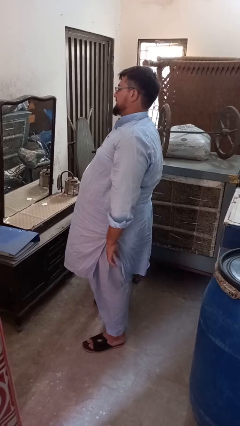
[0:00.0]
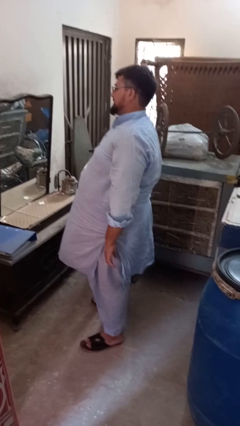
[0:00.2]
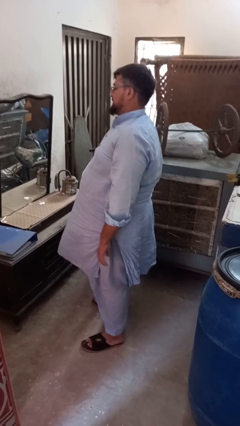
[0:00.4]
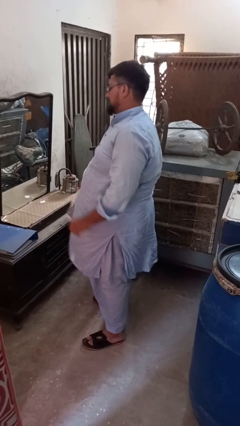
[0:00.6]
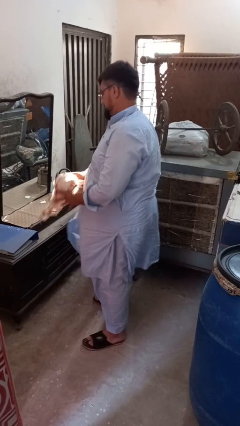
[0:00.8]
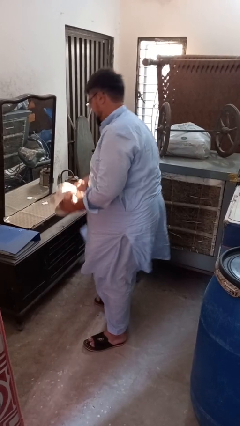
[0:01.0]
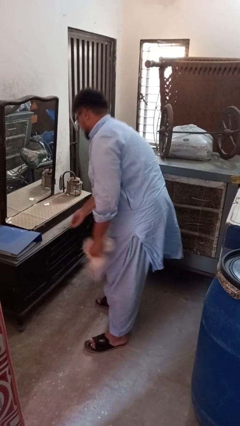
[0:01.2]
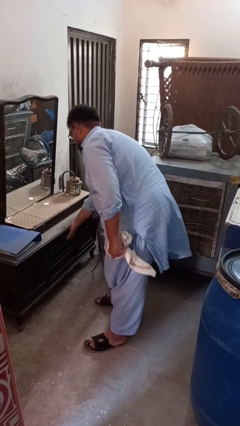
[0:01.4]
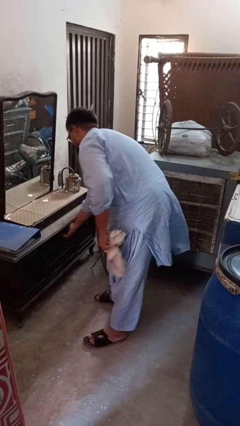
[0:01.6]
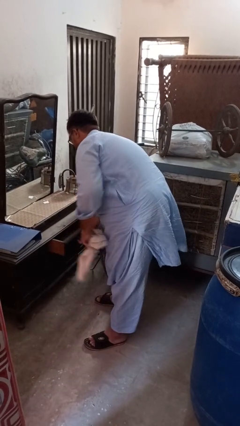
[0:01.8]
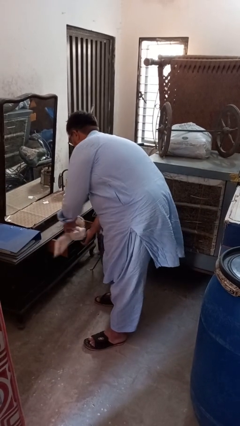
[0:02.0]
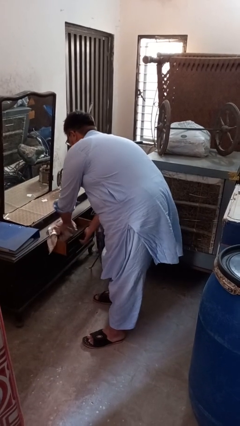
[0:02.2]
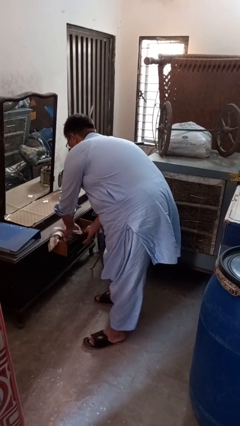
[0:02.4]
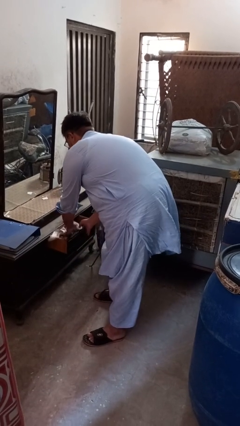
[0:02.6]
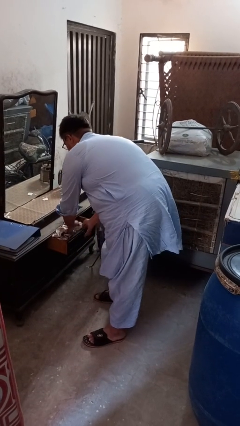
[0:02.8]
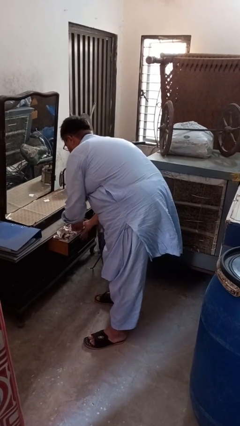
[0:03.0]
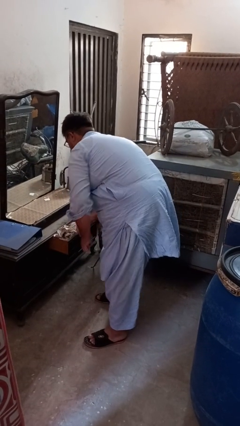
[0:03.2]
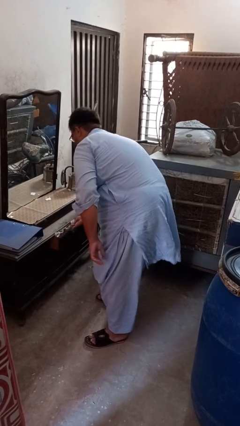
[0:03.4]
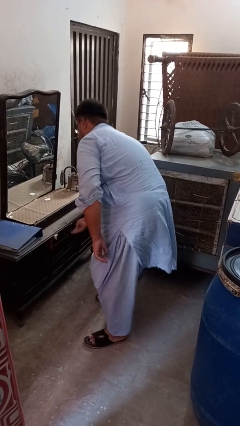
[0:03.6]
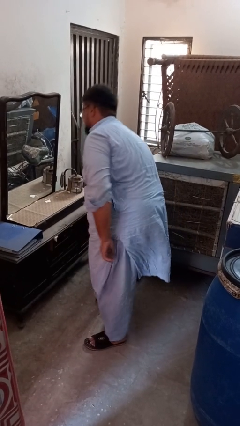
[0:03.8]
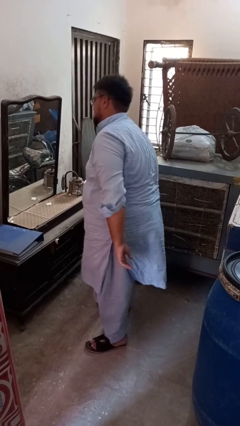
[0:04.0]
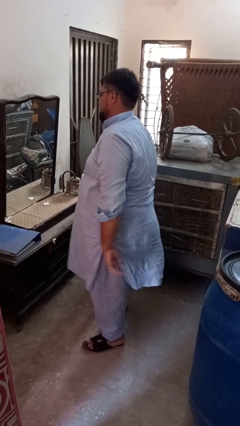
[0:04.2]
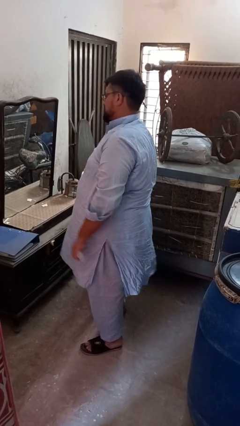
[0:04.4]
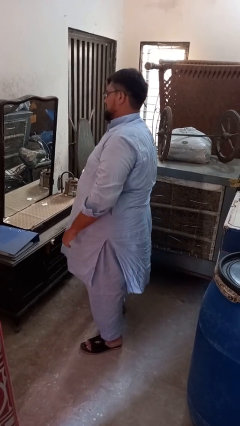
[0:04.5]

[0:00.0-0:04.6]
person puts clothes into dresser

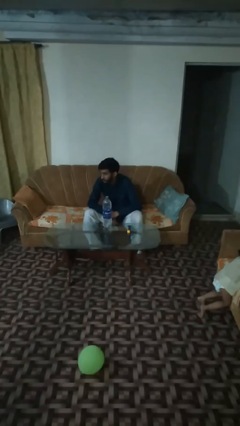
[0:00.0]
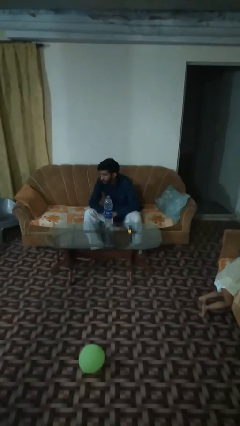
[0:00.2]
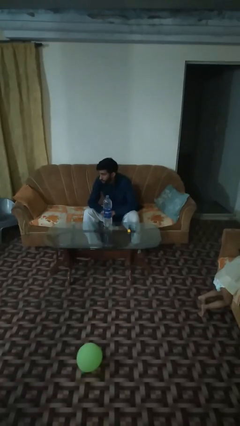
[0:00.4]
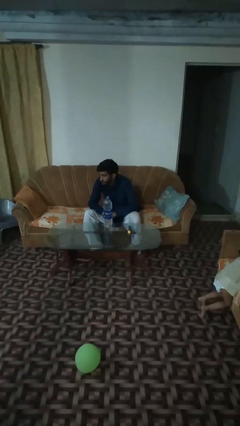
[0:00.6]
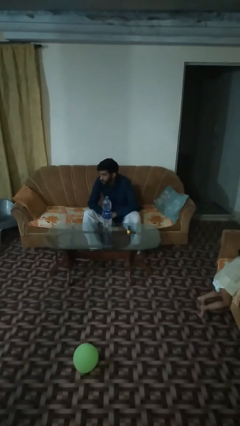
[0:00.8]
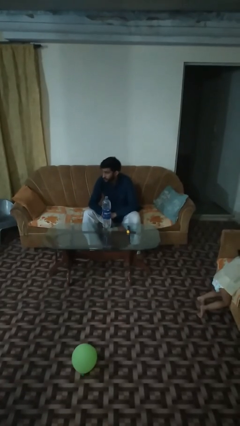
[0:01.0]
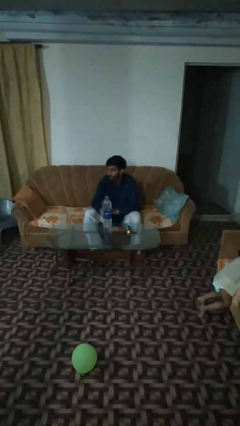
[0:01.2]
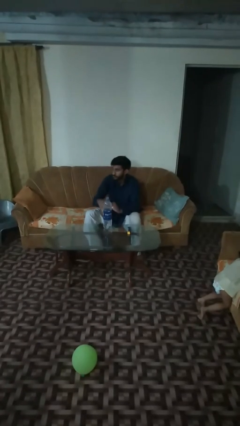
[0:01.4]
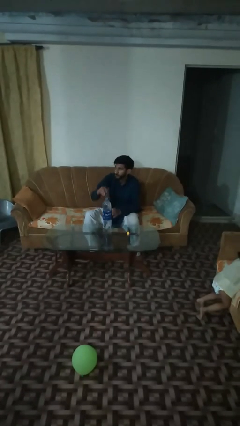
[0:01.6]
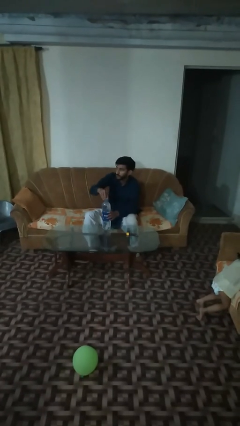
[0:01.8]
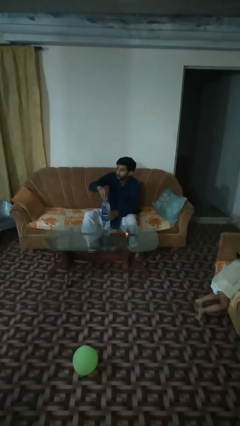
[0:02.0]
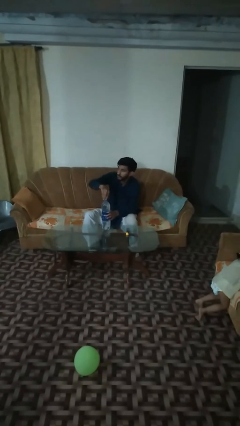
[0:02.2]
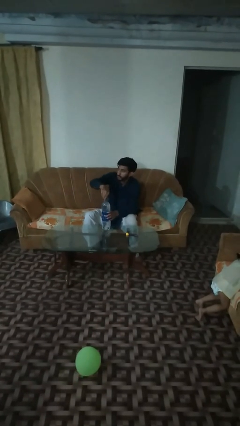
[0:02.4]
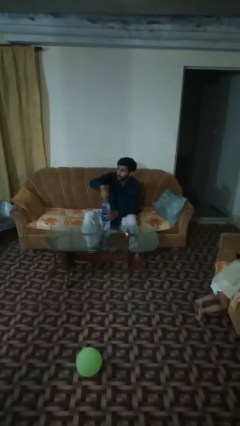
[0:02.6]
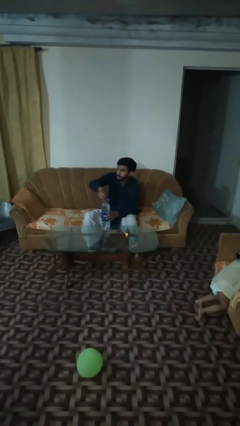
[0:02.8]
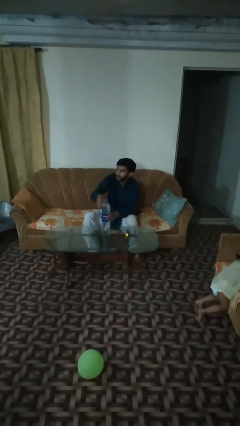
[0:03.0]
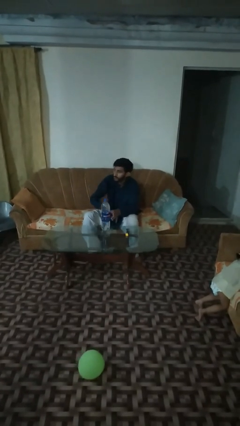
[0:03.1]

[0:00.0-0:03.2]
person screws lid to bottle

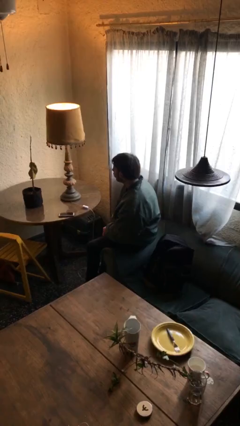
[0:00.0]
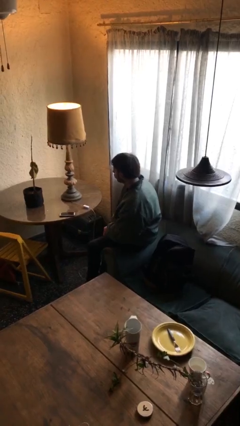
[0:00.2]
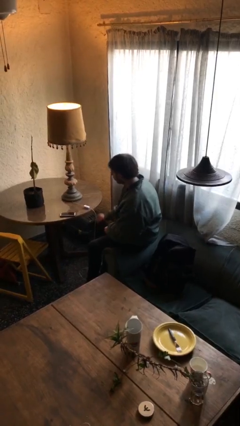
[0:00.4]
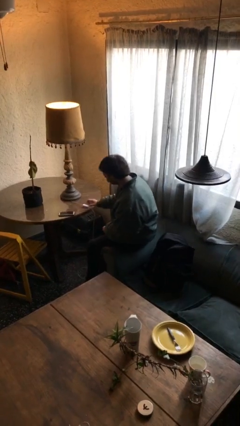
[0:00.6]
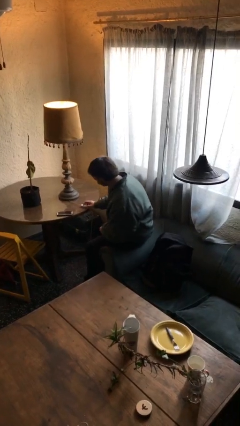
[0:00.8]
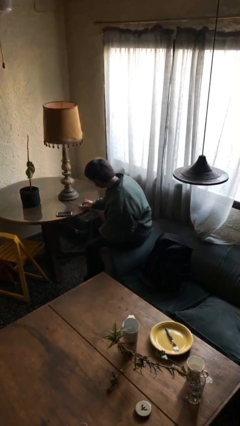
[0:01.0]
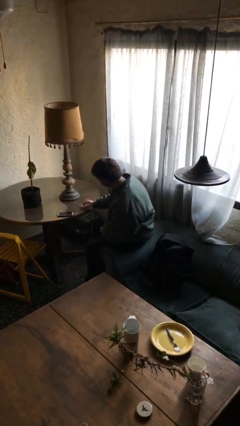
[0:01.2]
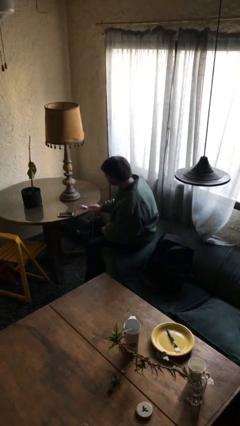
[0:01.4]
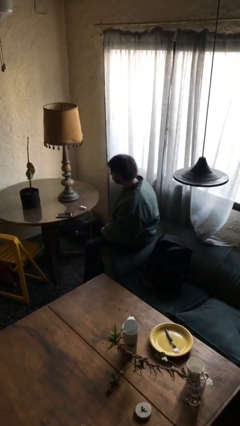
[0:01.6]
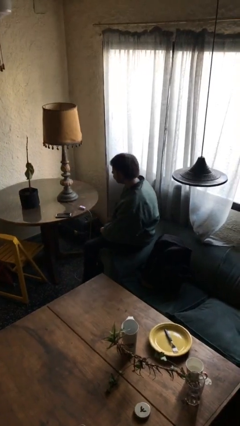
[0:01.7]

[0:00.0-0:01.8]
person turns off lamp

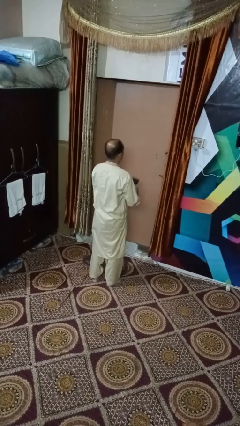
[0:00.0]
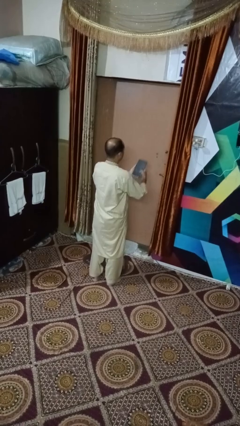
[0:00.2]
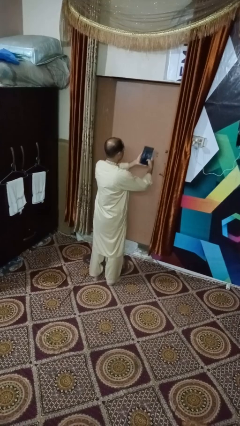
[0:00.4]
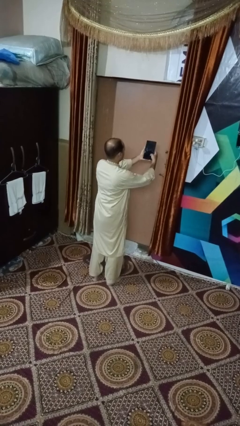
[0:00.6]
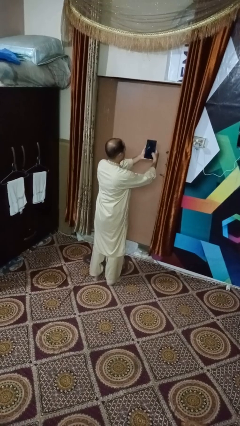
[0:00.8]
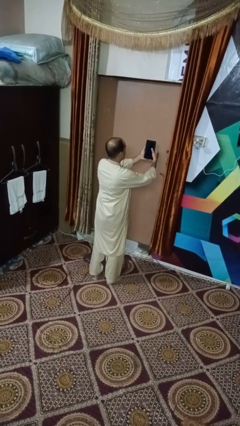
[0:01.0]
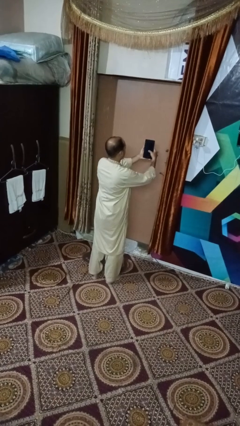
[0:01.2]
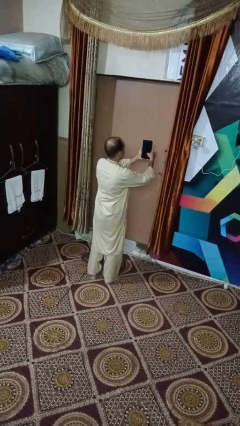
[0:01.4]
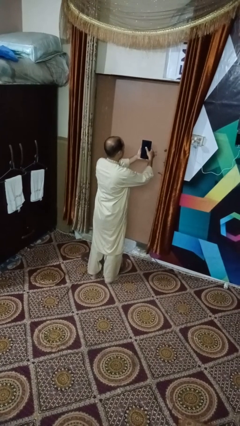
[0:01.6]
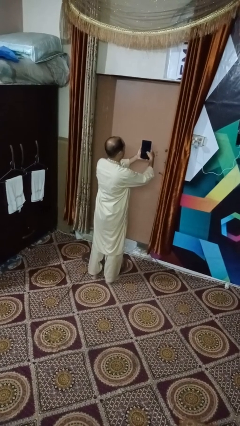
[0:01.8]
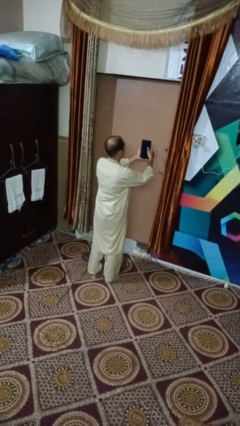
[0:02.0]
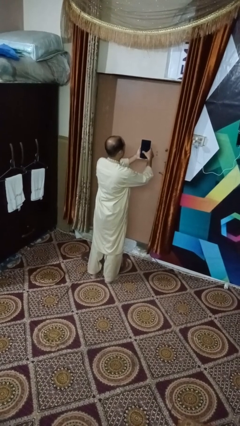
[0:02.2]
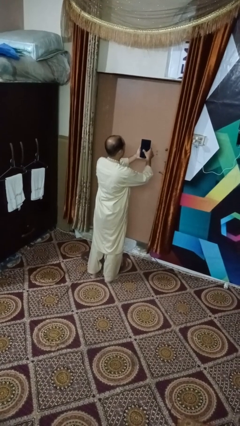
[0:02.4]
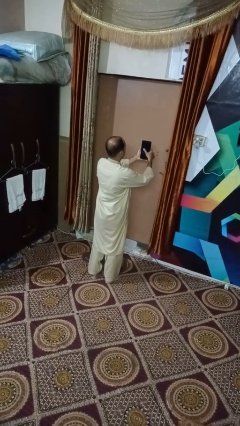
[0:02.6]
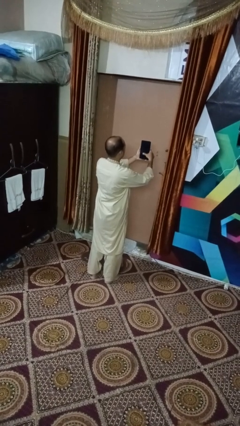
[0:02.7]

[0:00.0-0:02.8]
person interacts with tablet

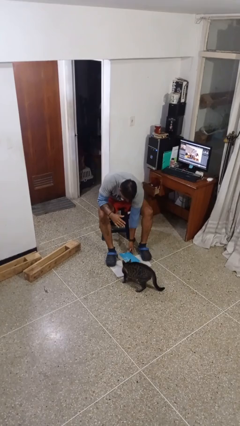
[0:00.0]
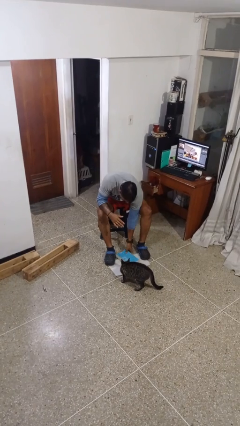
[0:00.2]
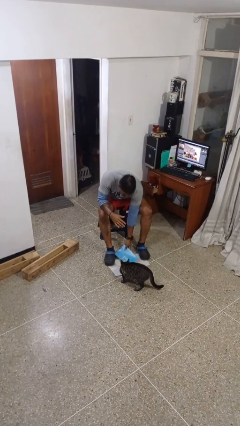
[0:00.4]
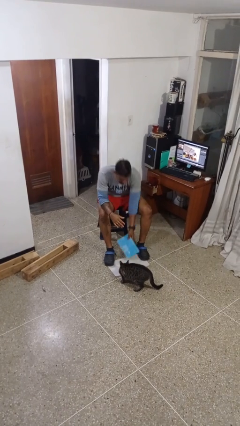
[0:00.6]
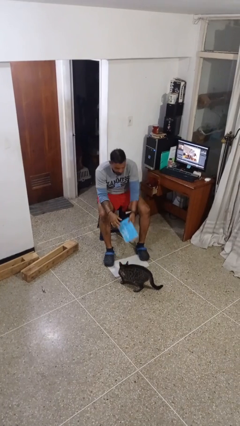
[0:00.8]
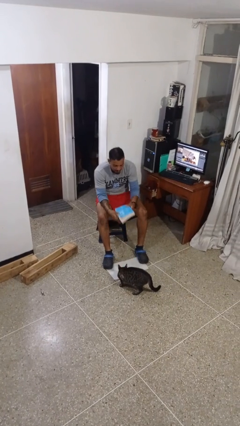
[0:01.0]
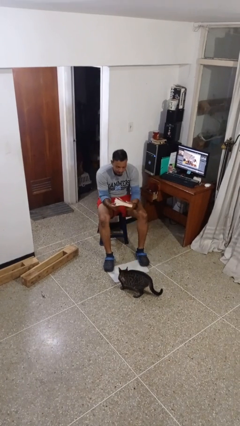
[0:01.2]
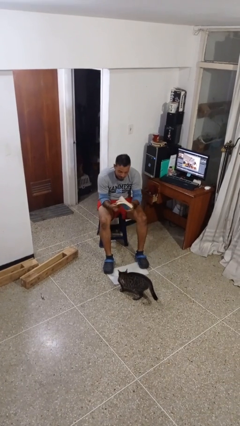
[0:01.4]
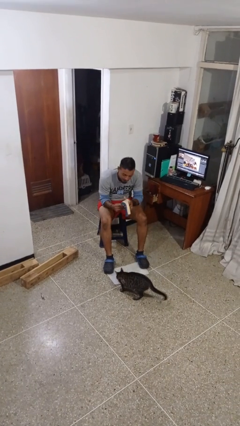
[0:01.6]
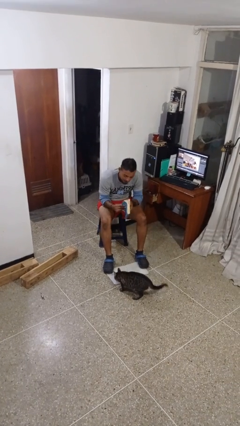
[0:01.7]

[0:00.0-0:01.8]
person picks up object from floor

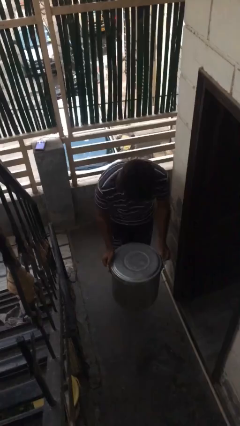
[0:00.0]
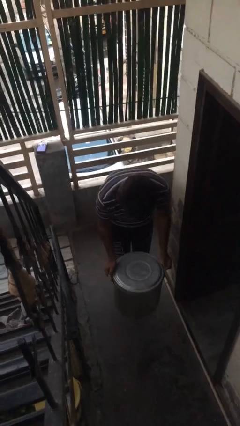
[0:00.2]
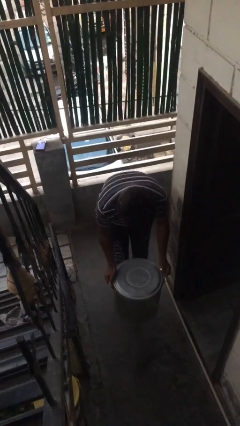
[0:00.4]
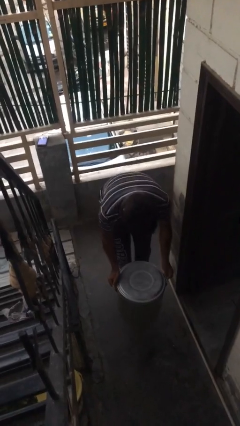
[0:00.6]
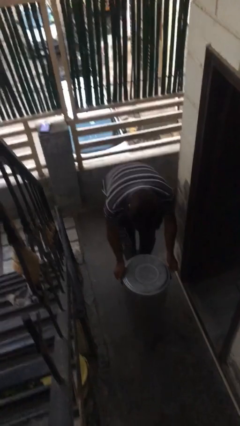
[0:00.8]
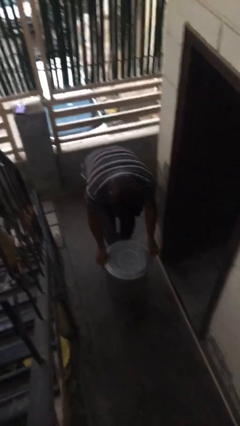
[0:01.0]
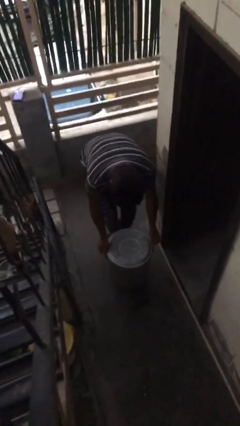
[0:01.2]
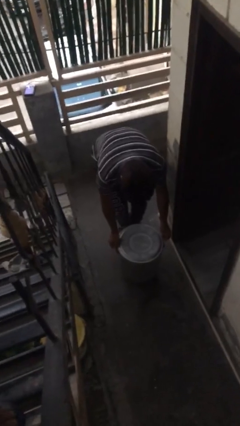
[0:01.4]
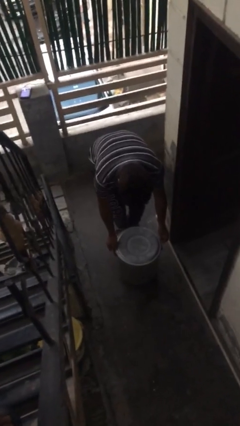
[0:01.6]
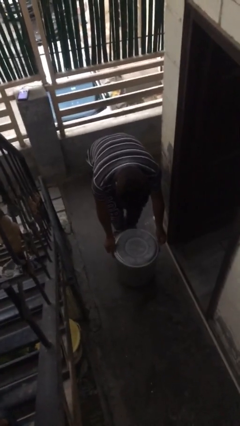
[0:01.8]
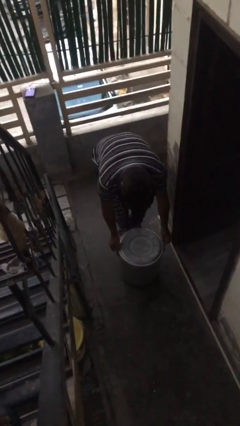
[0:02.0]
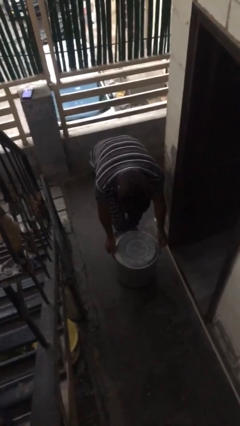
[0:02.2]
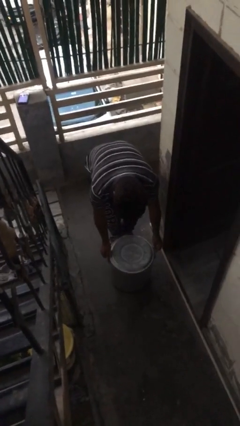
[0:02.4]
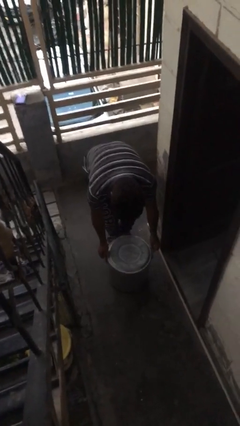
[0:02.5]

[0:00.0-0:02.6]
person puts down object on floor

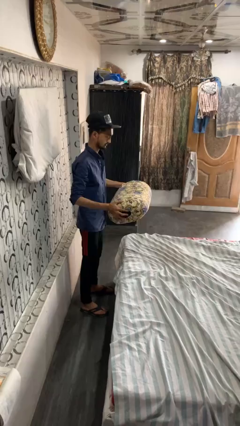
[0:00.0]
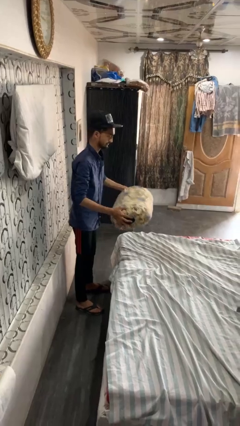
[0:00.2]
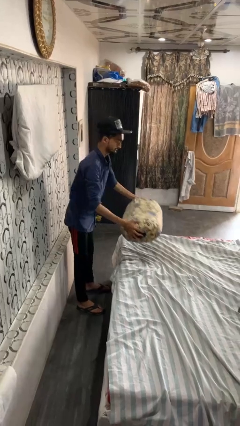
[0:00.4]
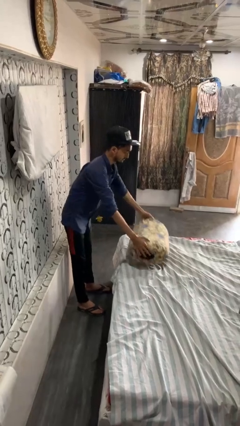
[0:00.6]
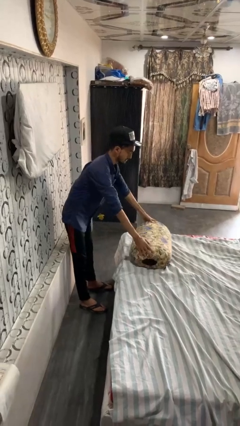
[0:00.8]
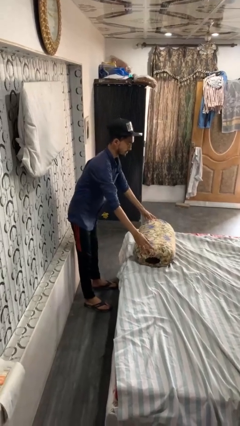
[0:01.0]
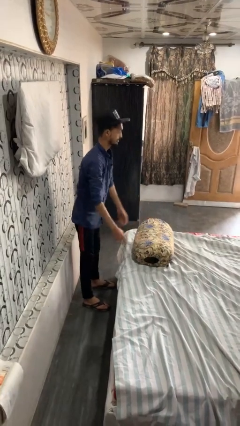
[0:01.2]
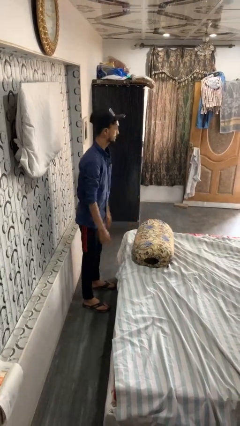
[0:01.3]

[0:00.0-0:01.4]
person puts down object on bed
